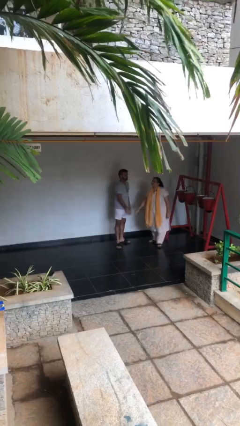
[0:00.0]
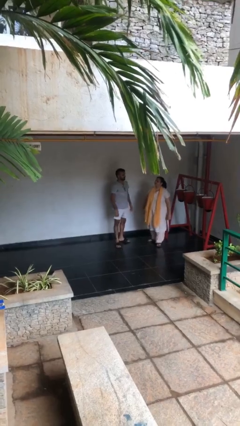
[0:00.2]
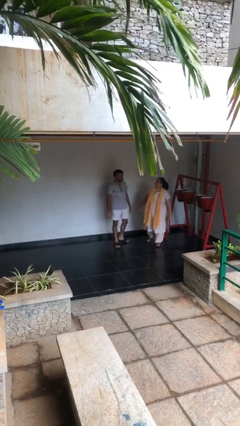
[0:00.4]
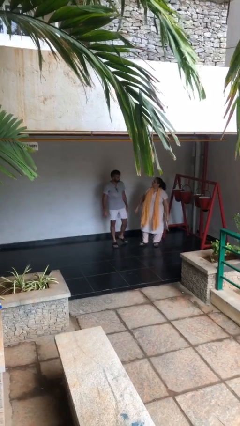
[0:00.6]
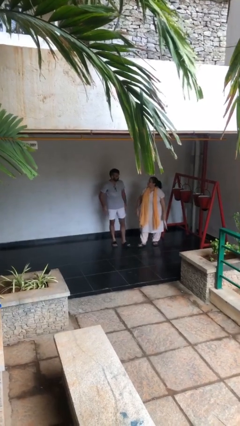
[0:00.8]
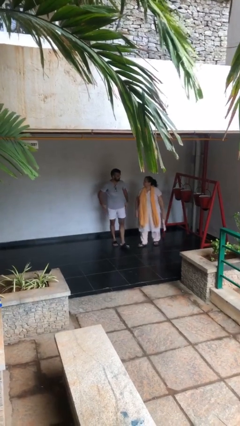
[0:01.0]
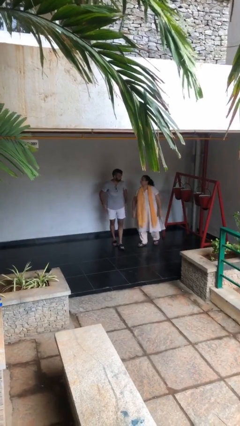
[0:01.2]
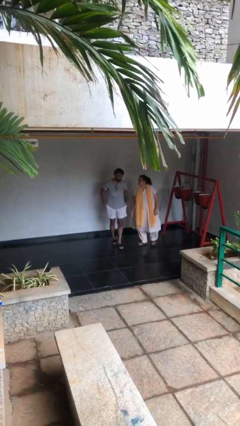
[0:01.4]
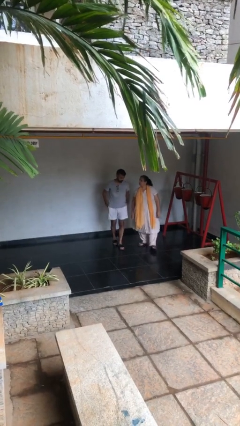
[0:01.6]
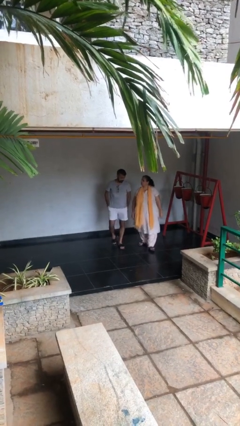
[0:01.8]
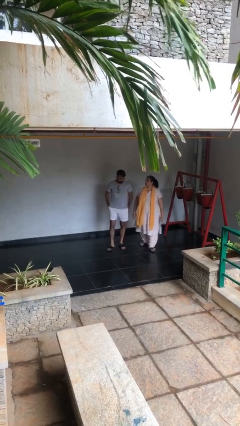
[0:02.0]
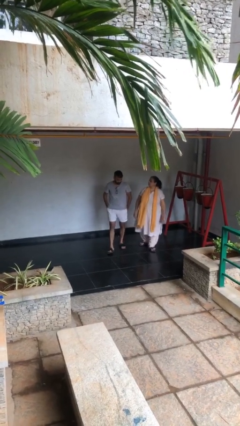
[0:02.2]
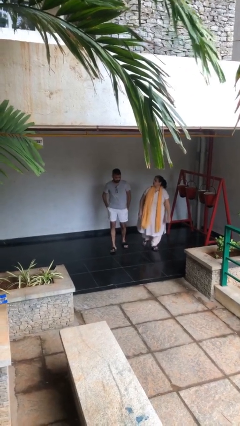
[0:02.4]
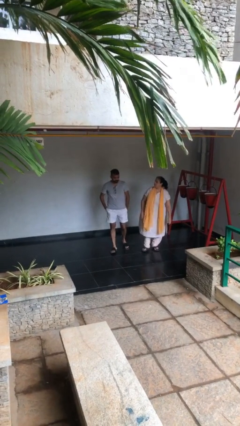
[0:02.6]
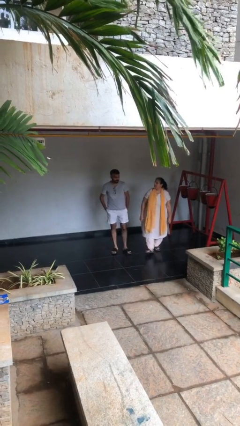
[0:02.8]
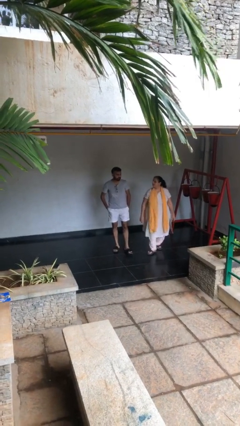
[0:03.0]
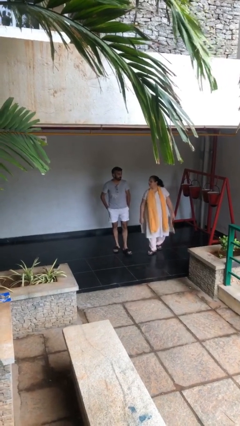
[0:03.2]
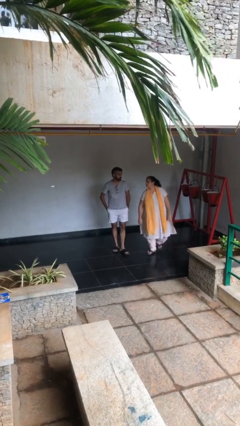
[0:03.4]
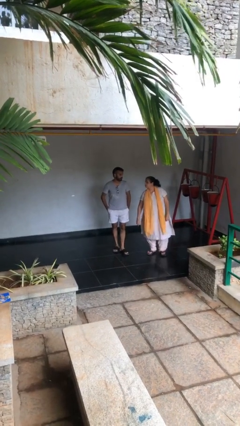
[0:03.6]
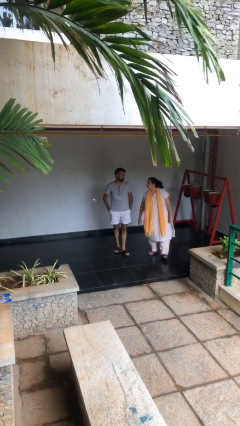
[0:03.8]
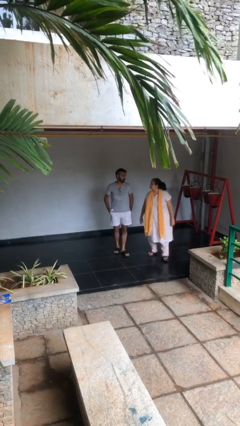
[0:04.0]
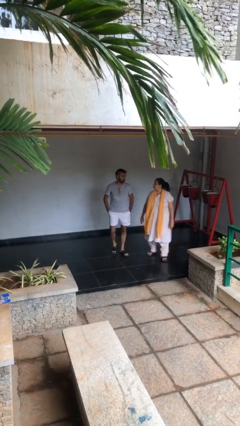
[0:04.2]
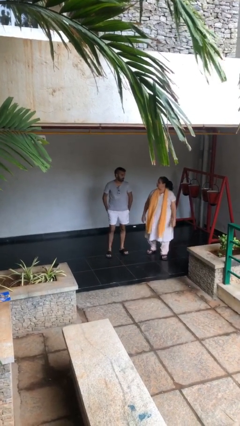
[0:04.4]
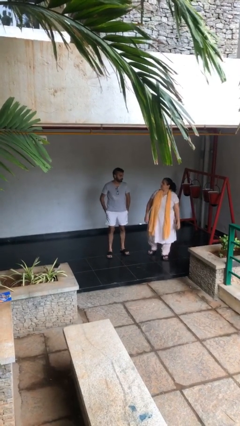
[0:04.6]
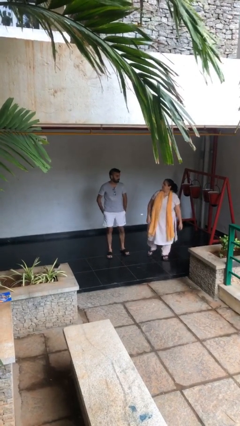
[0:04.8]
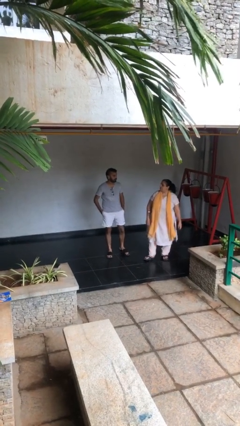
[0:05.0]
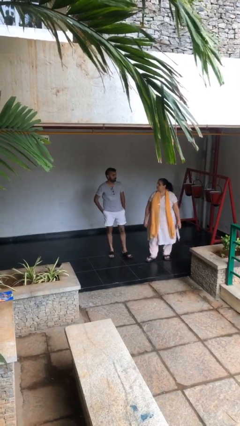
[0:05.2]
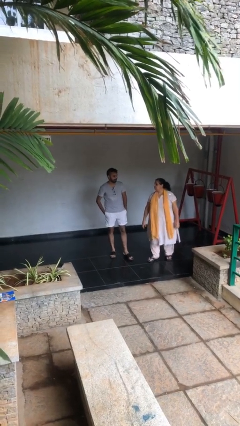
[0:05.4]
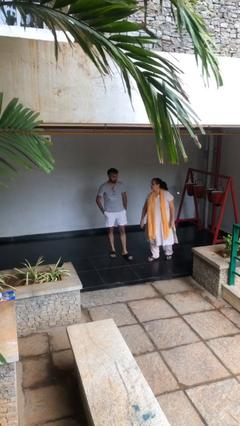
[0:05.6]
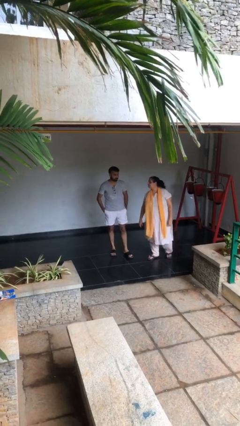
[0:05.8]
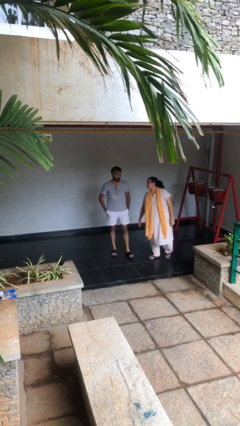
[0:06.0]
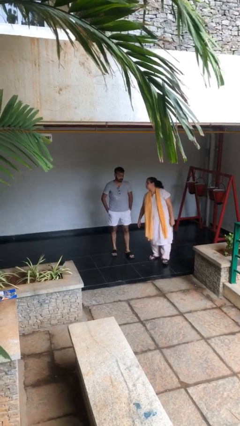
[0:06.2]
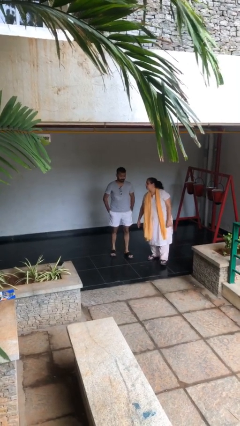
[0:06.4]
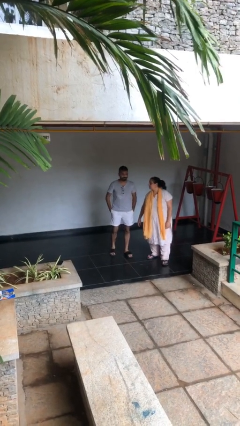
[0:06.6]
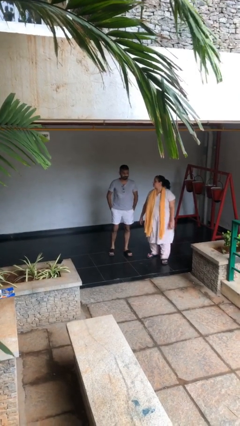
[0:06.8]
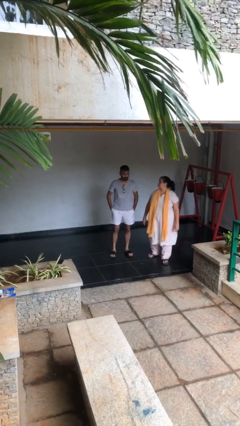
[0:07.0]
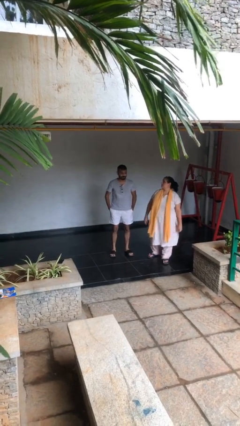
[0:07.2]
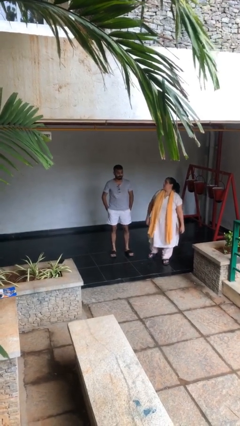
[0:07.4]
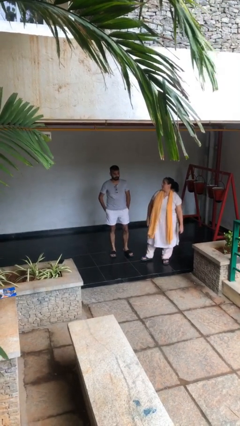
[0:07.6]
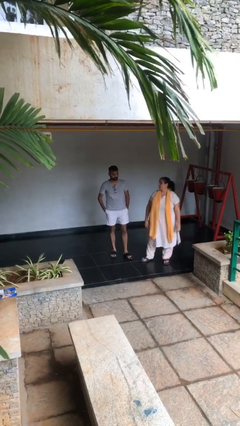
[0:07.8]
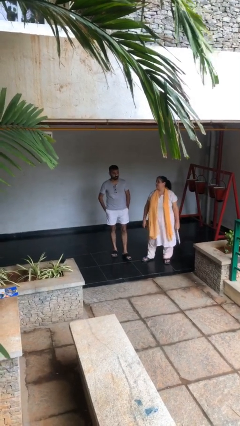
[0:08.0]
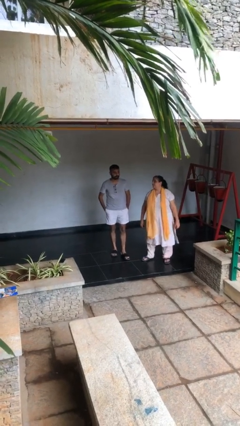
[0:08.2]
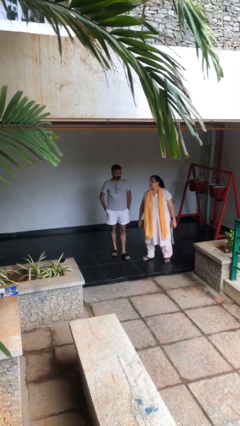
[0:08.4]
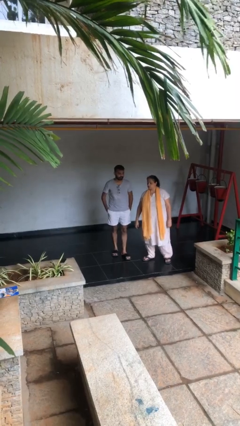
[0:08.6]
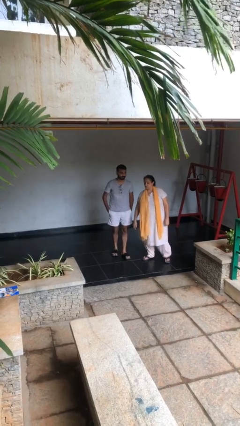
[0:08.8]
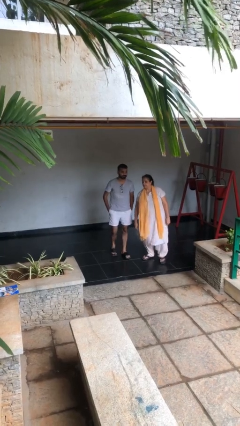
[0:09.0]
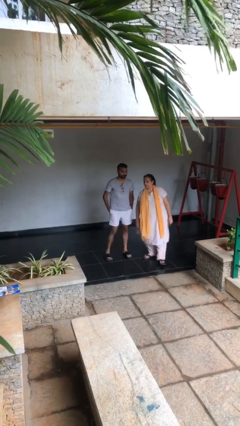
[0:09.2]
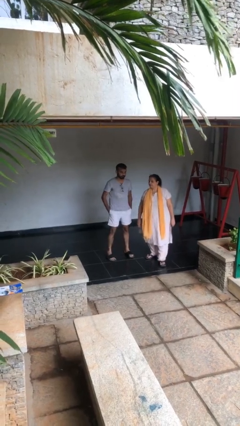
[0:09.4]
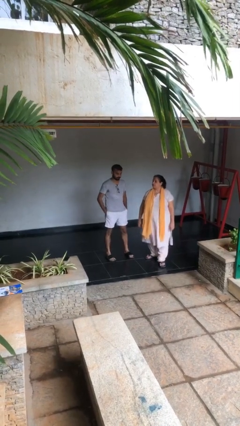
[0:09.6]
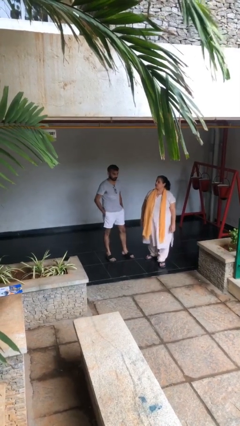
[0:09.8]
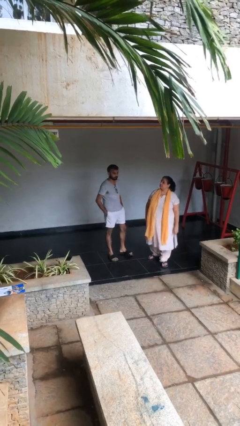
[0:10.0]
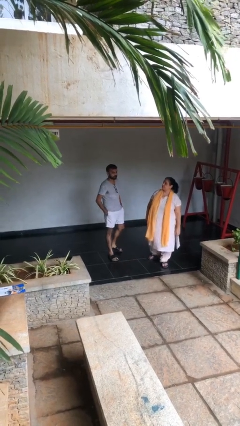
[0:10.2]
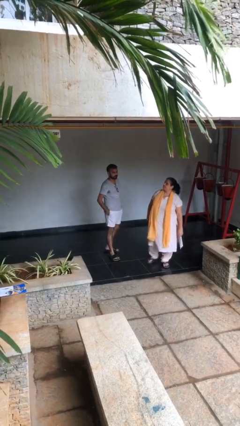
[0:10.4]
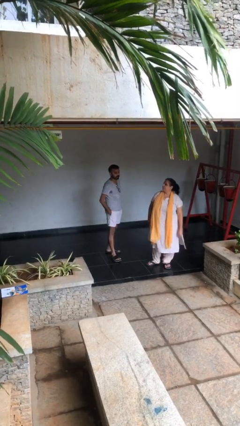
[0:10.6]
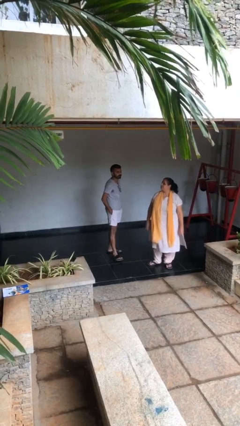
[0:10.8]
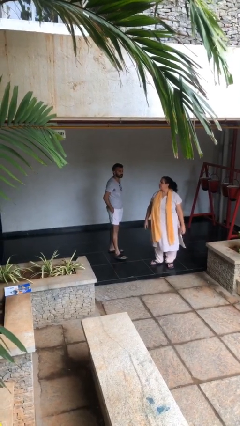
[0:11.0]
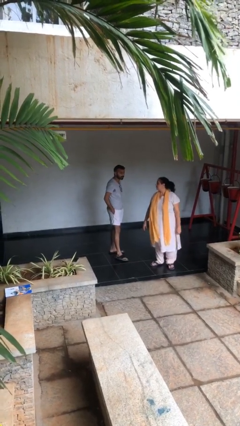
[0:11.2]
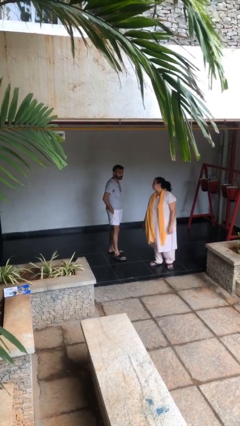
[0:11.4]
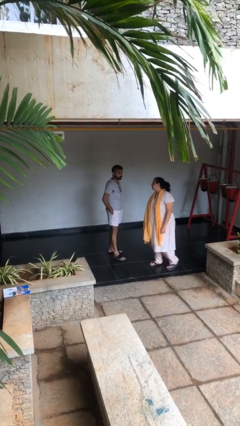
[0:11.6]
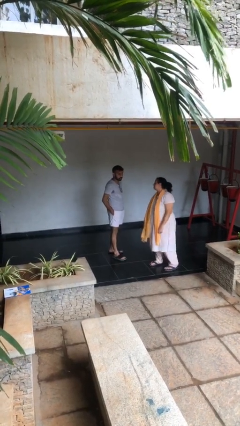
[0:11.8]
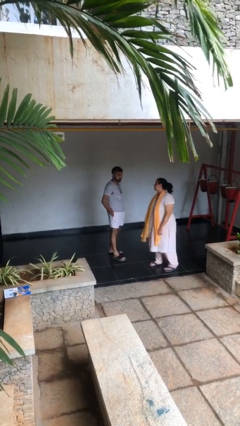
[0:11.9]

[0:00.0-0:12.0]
person talks to person

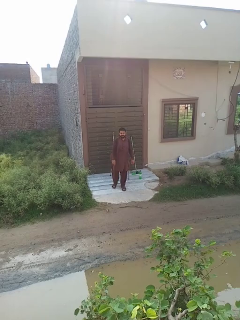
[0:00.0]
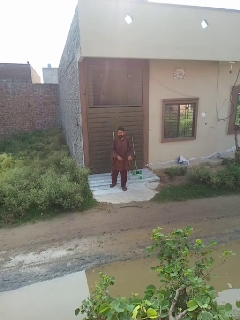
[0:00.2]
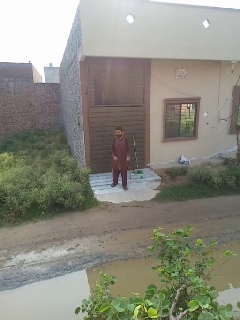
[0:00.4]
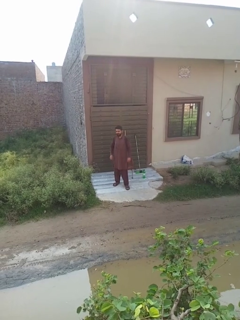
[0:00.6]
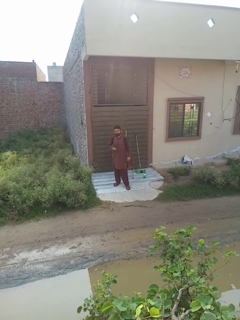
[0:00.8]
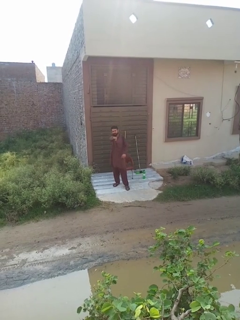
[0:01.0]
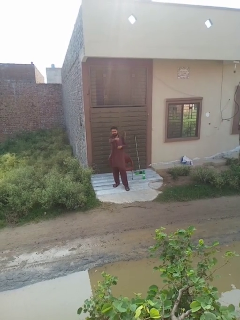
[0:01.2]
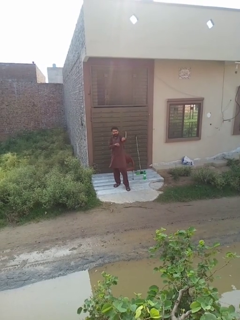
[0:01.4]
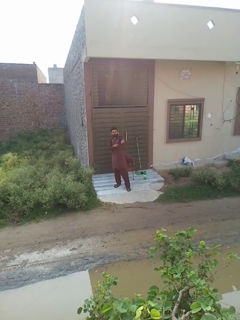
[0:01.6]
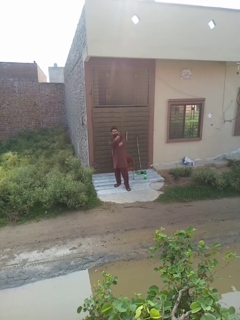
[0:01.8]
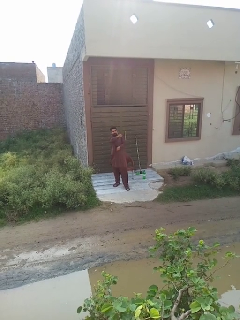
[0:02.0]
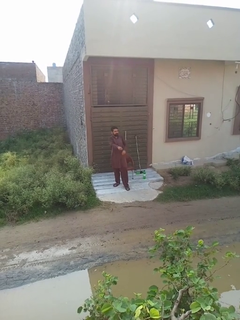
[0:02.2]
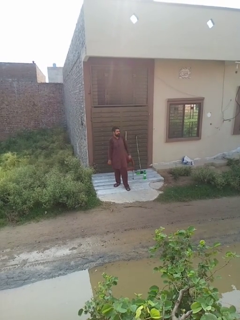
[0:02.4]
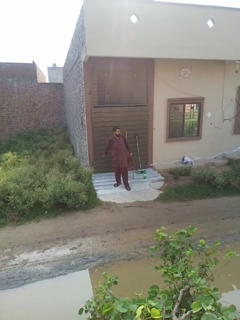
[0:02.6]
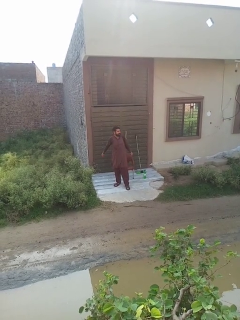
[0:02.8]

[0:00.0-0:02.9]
person punches

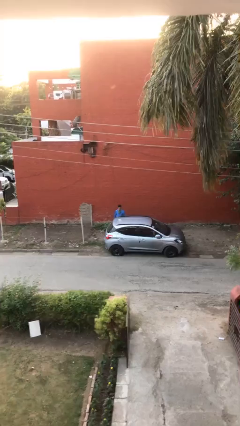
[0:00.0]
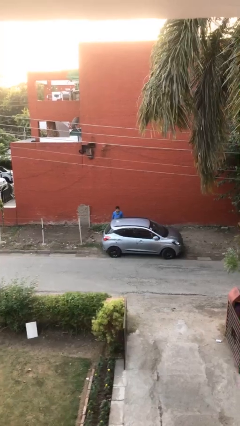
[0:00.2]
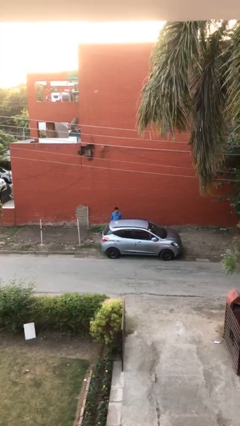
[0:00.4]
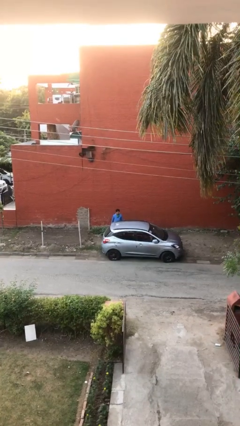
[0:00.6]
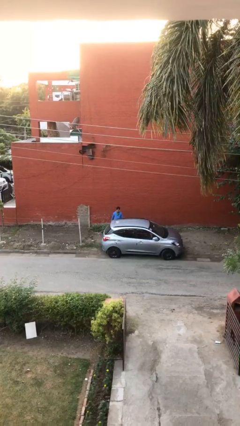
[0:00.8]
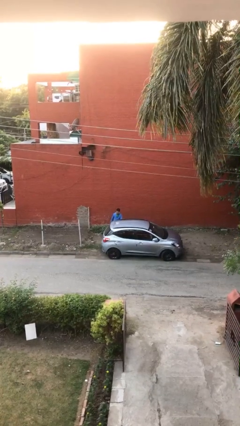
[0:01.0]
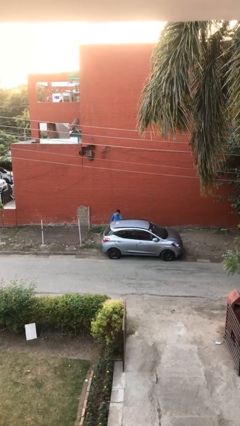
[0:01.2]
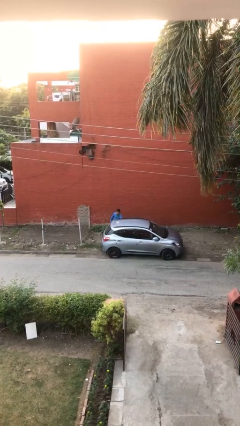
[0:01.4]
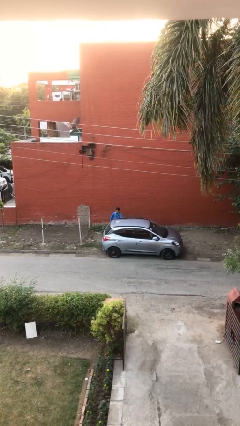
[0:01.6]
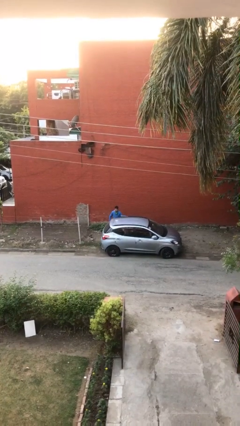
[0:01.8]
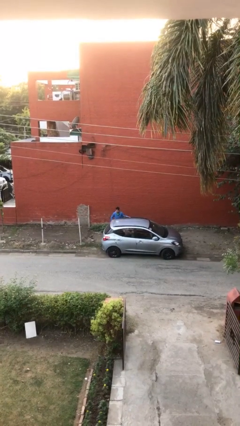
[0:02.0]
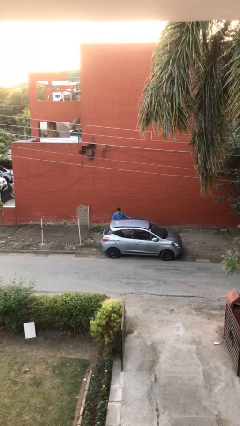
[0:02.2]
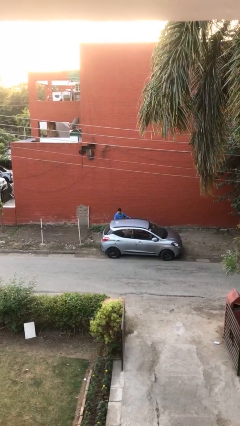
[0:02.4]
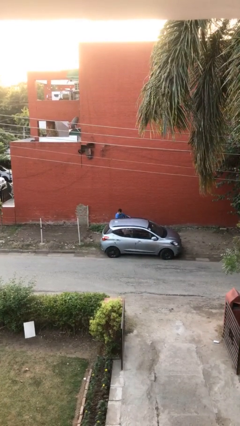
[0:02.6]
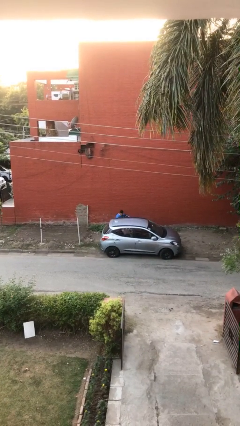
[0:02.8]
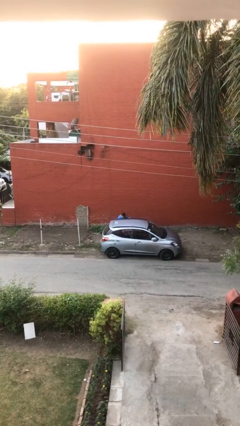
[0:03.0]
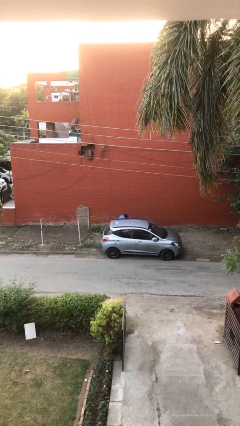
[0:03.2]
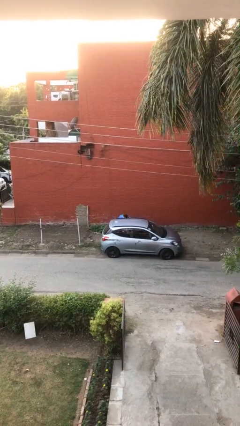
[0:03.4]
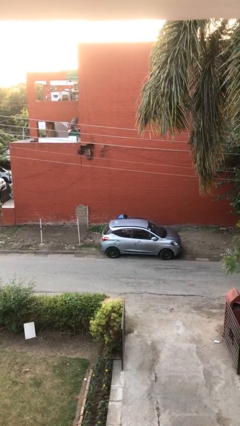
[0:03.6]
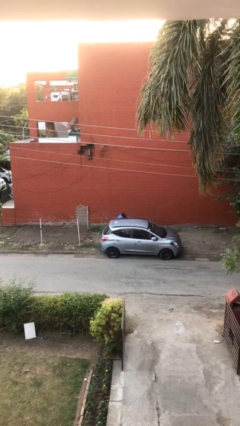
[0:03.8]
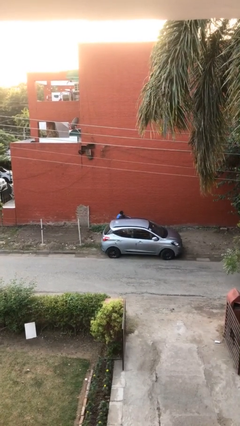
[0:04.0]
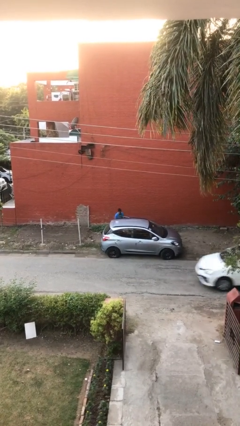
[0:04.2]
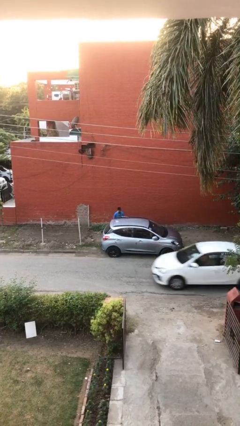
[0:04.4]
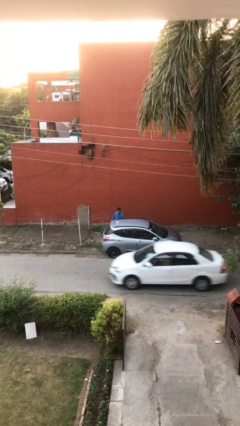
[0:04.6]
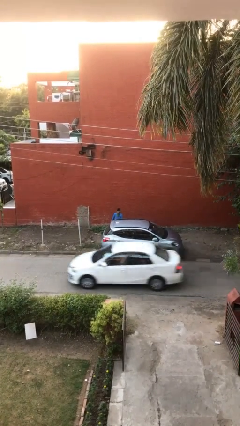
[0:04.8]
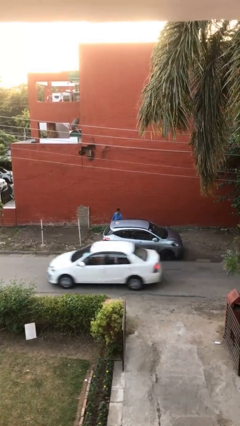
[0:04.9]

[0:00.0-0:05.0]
person loads car
